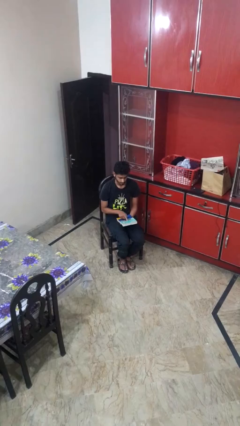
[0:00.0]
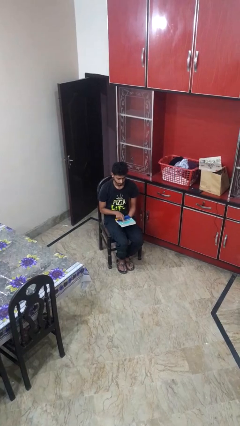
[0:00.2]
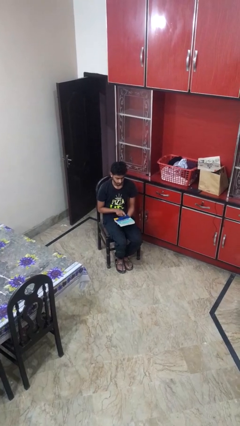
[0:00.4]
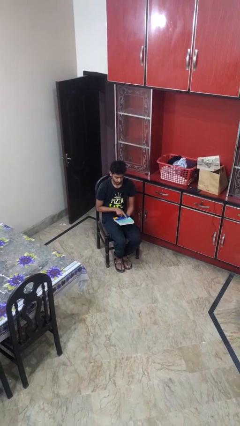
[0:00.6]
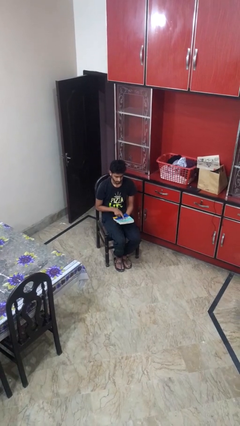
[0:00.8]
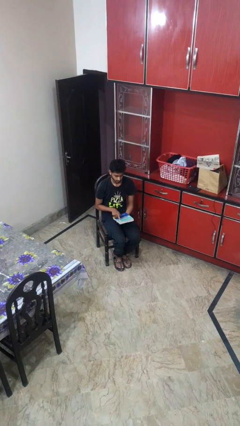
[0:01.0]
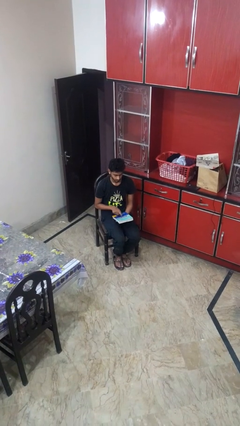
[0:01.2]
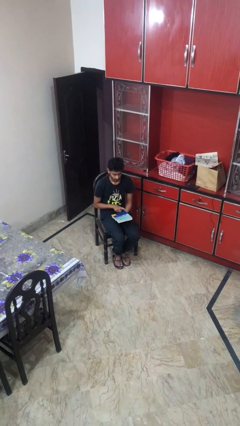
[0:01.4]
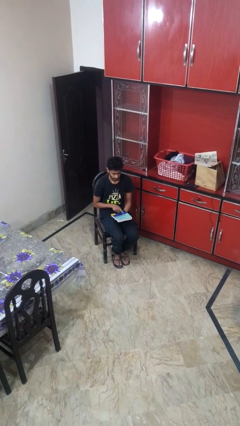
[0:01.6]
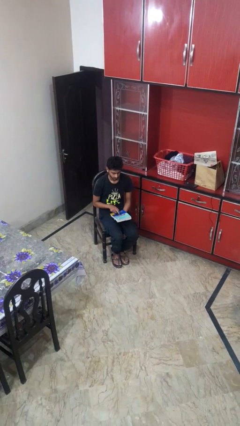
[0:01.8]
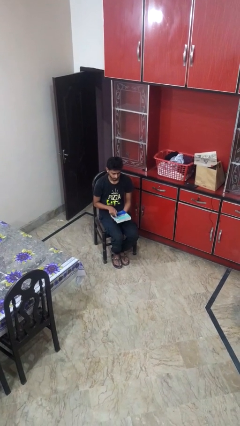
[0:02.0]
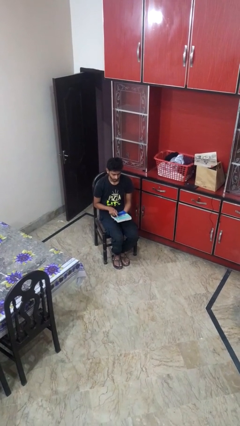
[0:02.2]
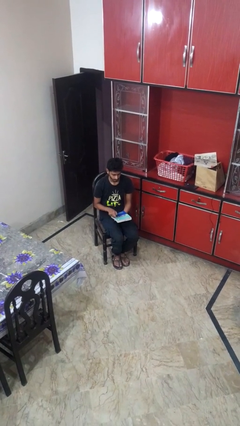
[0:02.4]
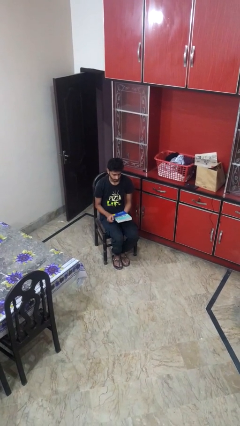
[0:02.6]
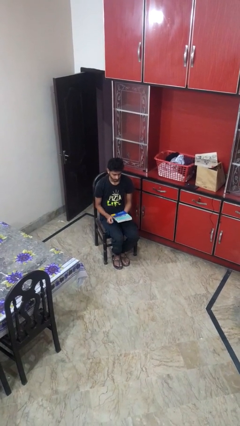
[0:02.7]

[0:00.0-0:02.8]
person taps object with finger

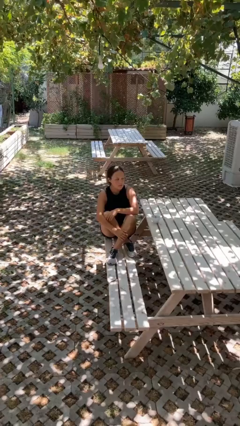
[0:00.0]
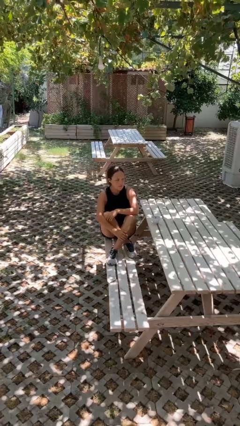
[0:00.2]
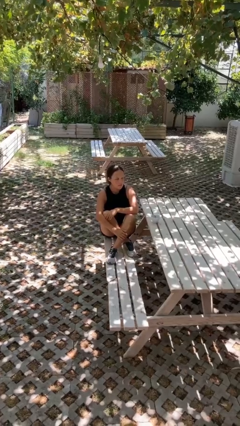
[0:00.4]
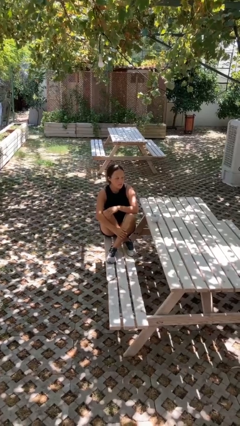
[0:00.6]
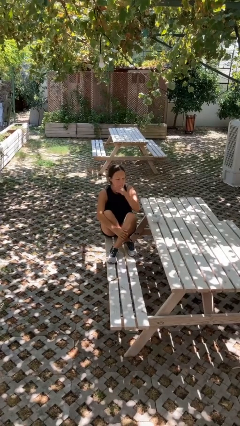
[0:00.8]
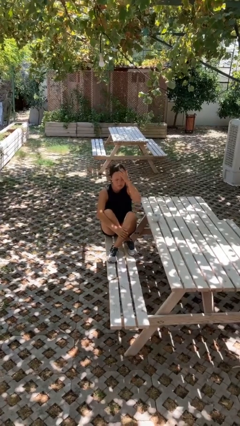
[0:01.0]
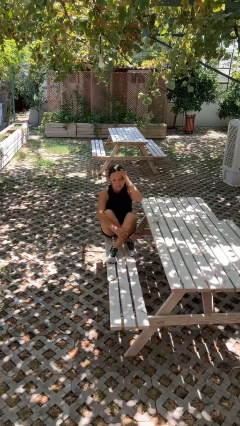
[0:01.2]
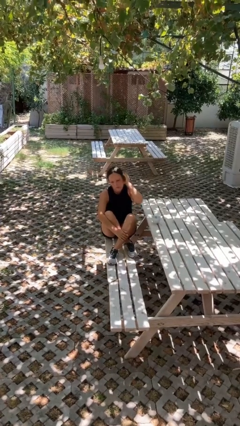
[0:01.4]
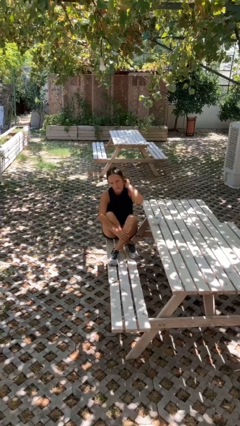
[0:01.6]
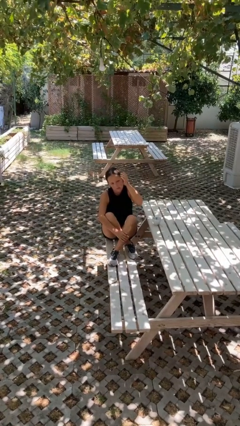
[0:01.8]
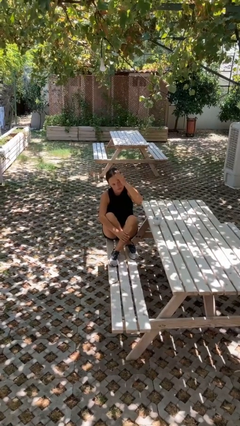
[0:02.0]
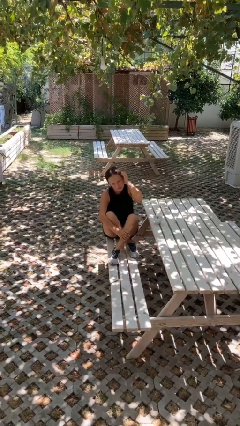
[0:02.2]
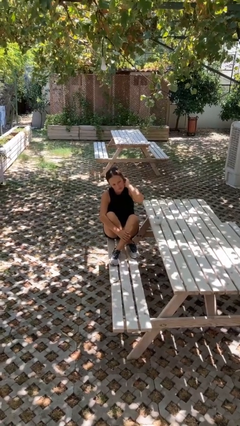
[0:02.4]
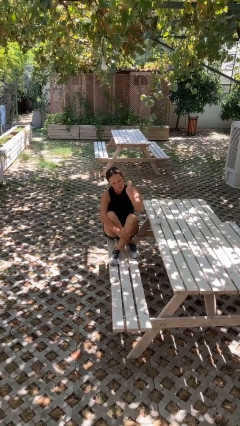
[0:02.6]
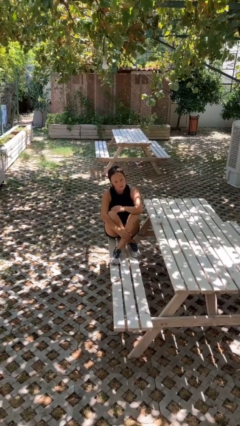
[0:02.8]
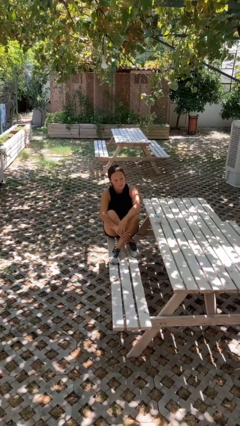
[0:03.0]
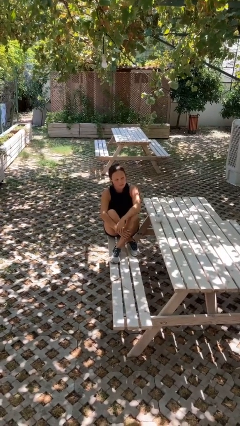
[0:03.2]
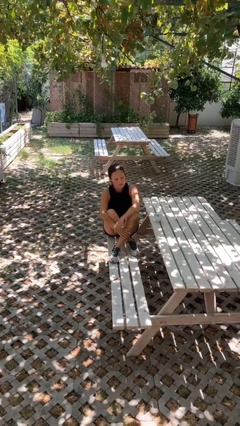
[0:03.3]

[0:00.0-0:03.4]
person strokes hair

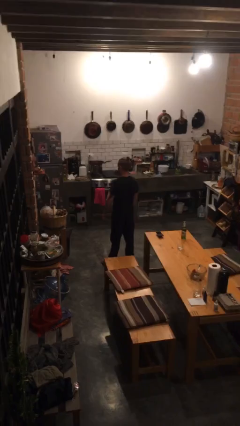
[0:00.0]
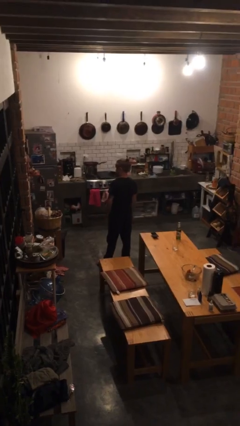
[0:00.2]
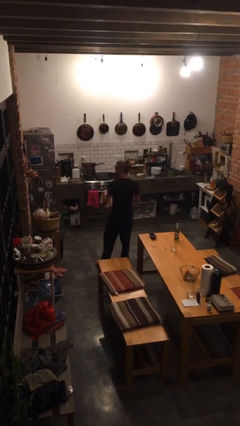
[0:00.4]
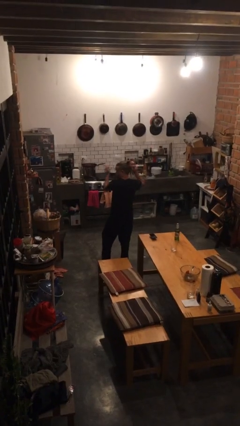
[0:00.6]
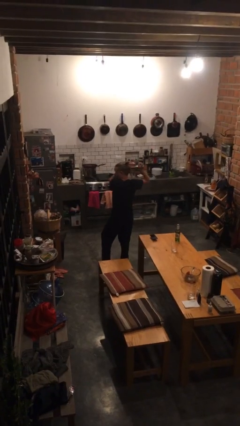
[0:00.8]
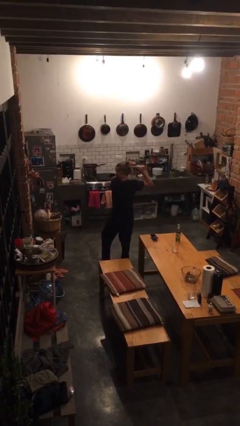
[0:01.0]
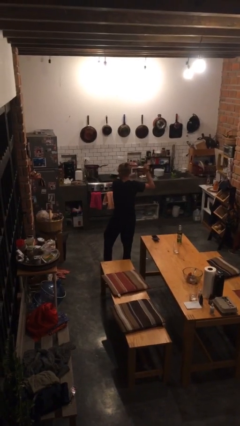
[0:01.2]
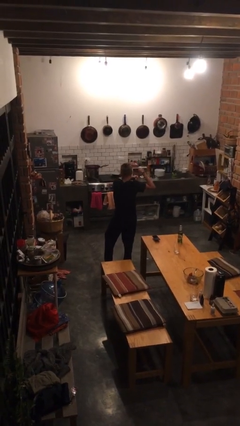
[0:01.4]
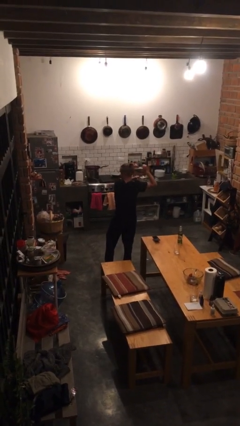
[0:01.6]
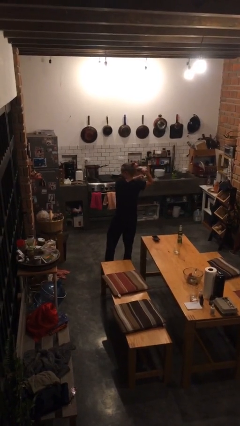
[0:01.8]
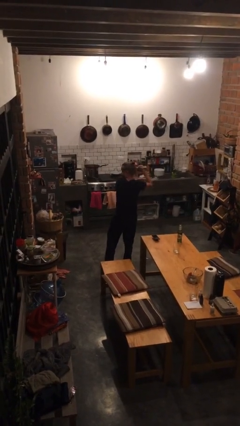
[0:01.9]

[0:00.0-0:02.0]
person gestures behind me

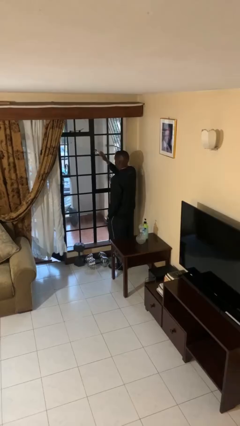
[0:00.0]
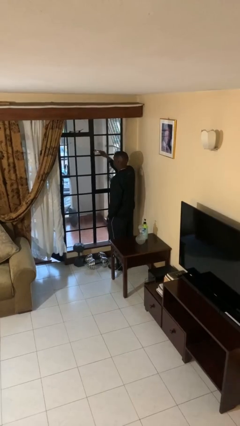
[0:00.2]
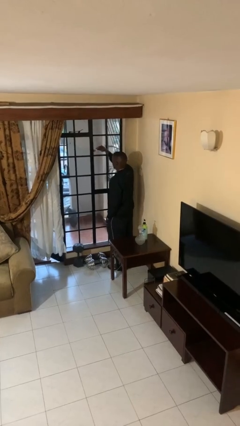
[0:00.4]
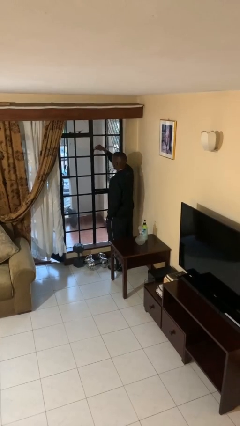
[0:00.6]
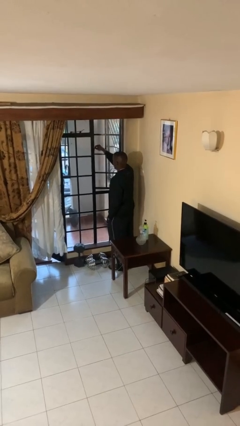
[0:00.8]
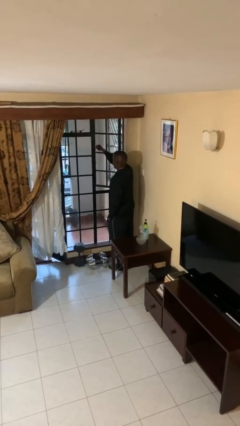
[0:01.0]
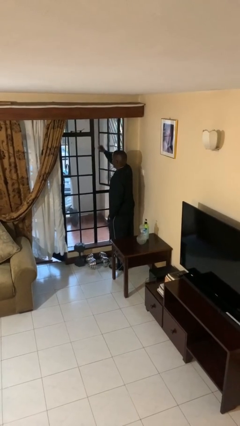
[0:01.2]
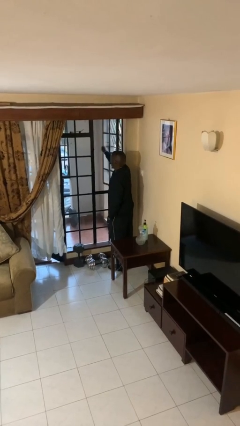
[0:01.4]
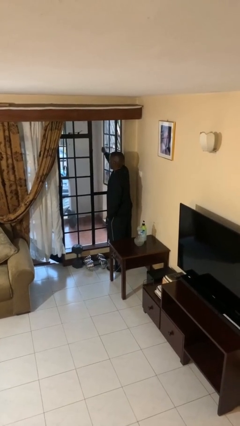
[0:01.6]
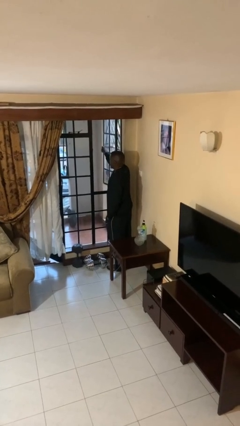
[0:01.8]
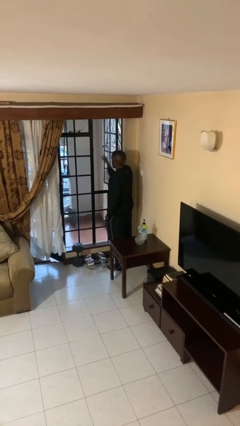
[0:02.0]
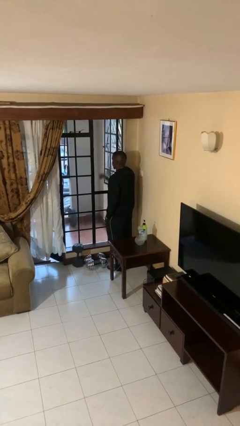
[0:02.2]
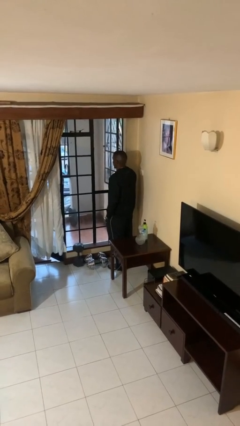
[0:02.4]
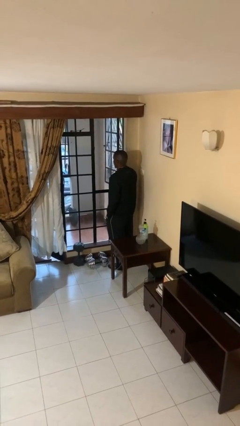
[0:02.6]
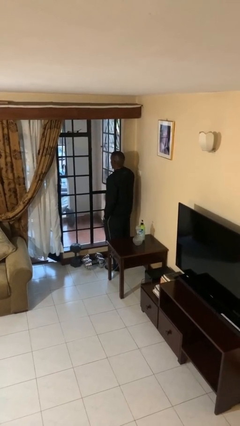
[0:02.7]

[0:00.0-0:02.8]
person opens home window

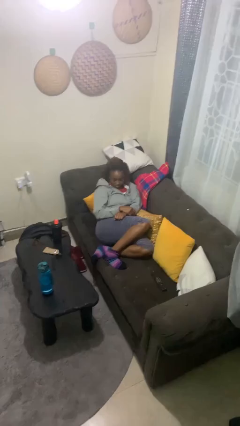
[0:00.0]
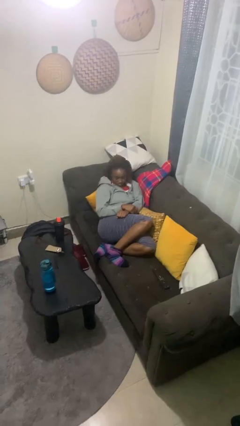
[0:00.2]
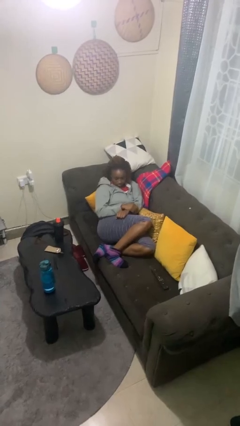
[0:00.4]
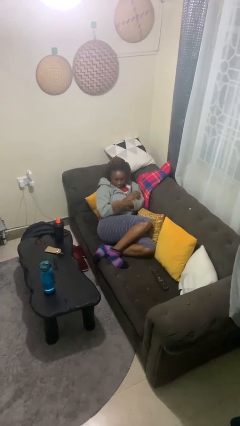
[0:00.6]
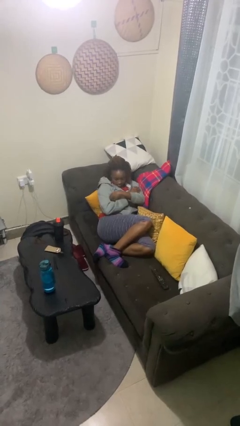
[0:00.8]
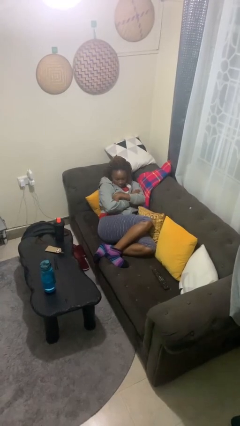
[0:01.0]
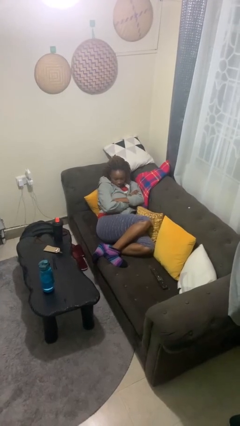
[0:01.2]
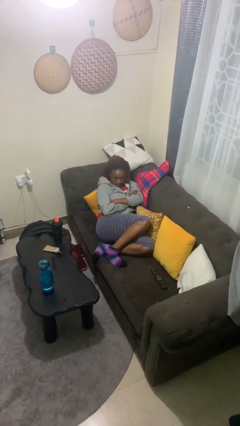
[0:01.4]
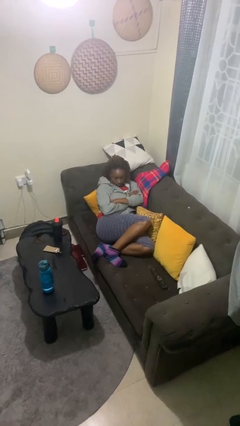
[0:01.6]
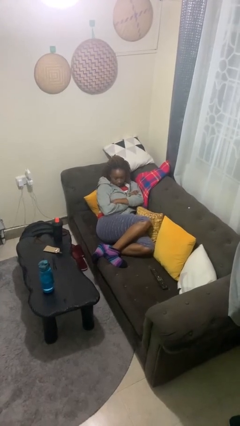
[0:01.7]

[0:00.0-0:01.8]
person crosses arms

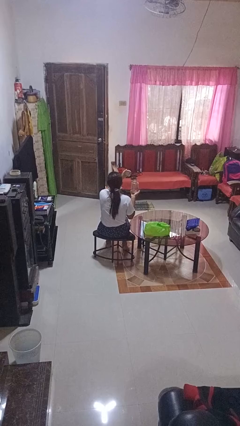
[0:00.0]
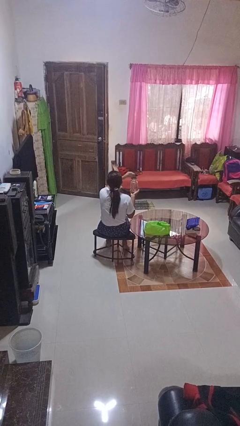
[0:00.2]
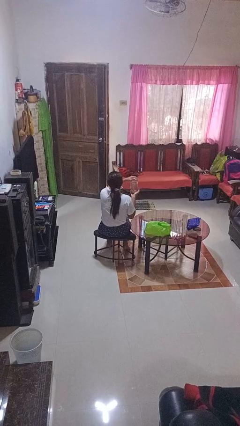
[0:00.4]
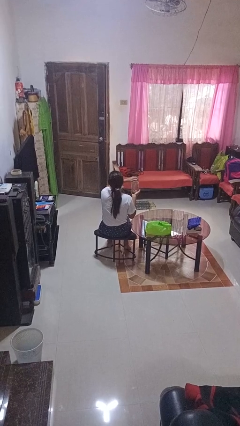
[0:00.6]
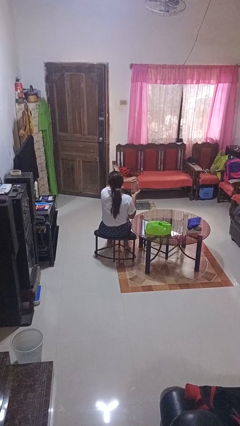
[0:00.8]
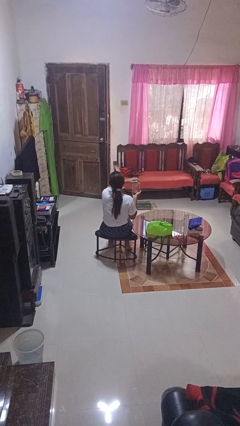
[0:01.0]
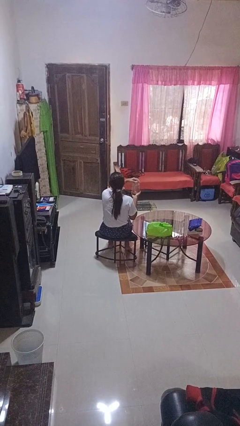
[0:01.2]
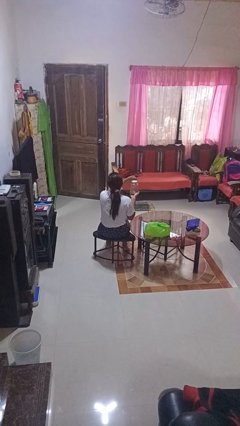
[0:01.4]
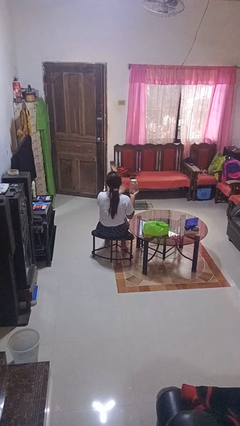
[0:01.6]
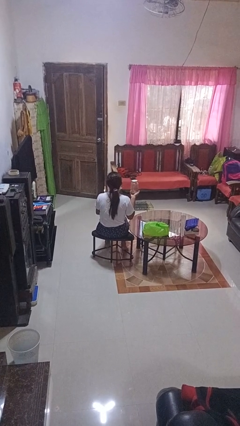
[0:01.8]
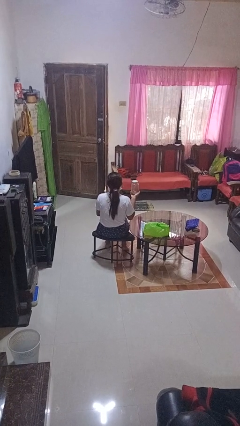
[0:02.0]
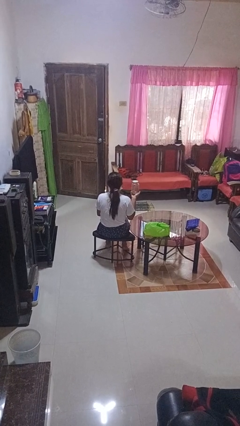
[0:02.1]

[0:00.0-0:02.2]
person closes jar

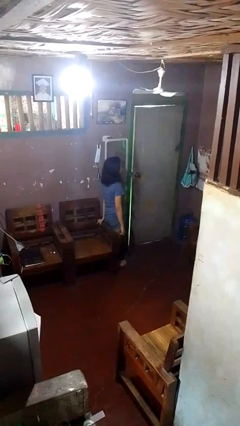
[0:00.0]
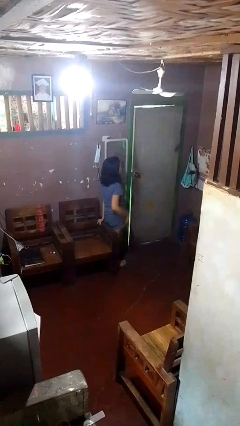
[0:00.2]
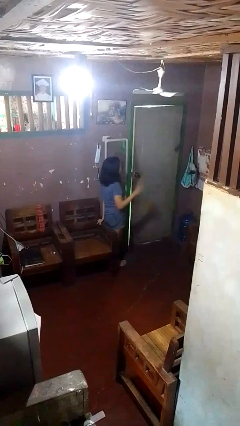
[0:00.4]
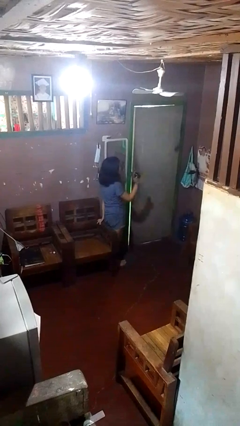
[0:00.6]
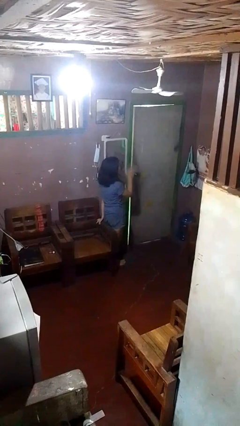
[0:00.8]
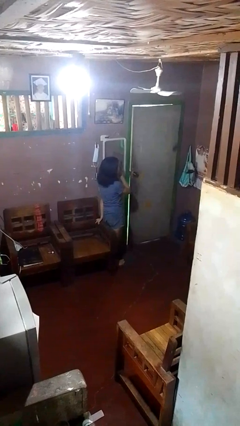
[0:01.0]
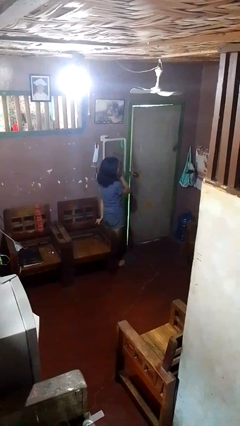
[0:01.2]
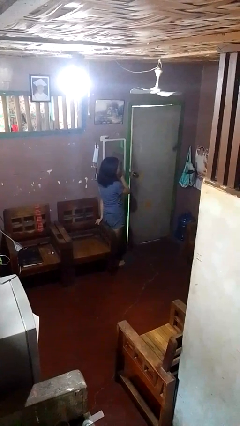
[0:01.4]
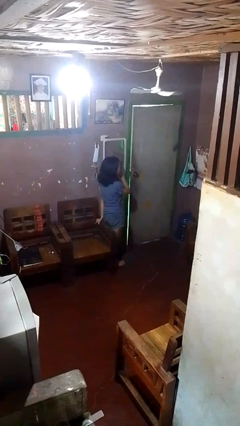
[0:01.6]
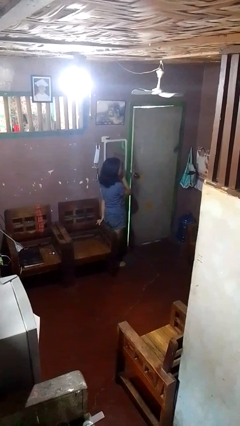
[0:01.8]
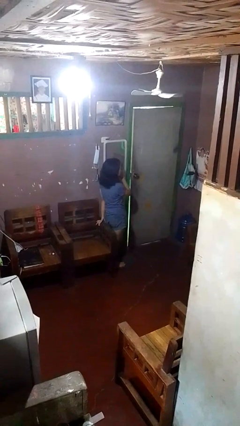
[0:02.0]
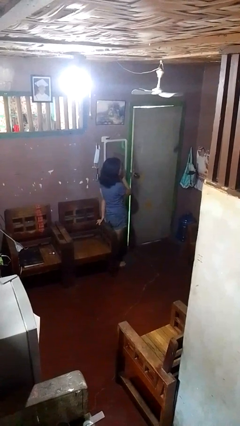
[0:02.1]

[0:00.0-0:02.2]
person gestures swipe left
